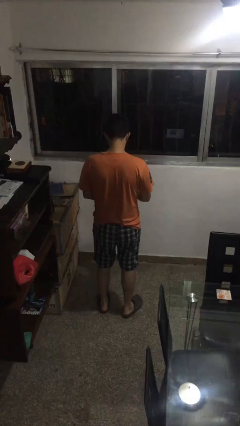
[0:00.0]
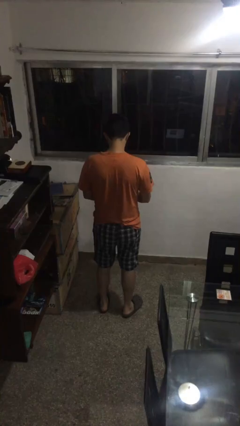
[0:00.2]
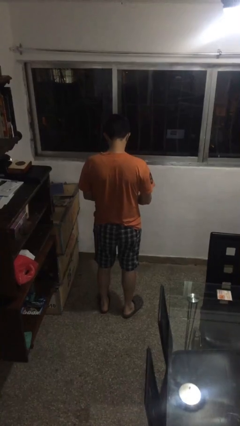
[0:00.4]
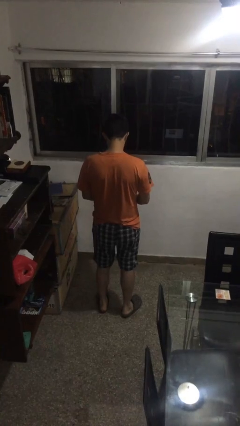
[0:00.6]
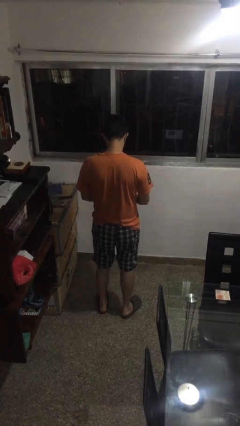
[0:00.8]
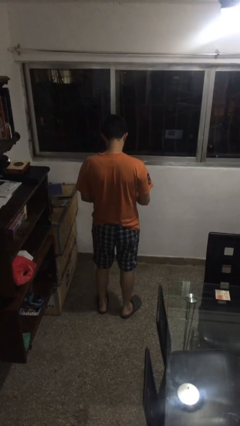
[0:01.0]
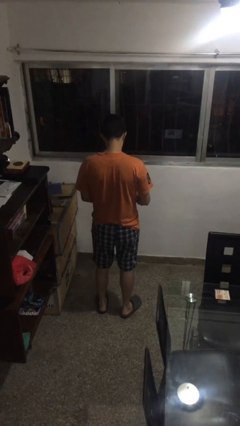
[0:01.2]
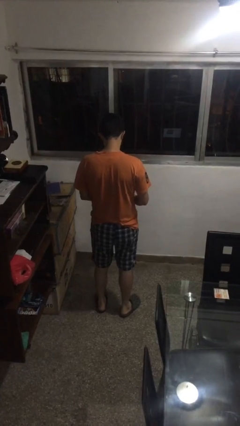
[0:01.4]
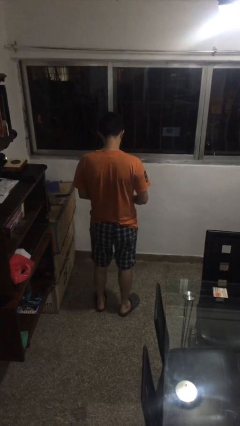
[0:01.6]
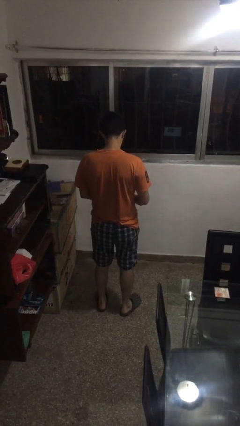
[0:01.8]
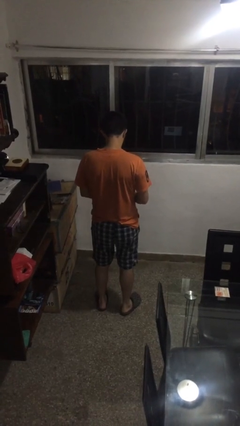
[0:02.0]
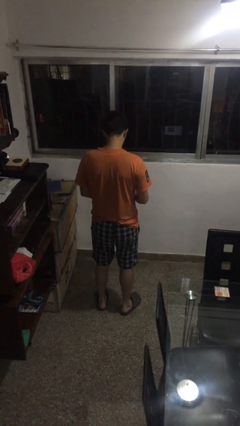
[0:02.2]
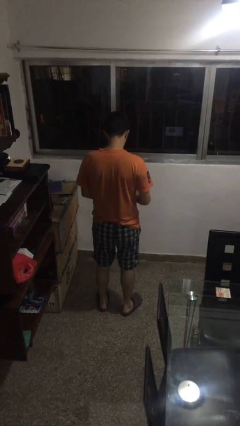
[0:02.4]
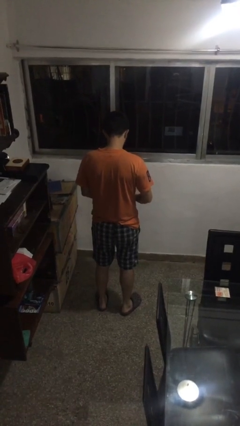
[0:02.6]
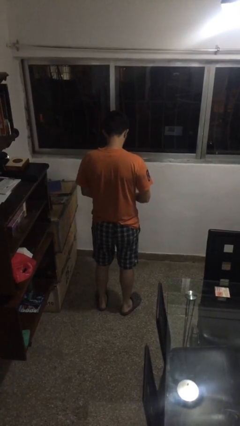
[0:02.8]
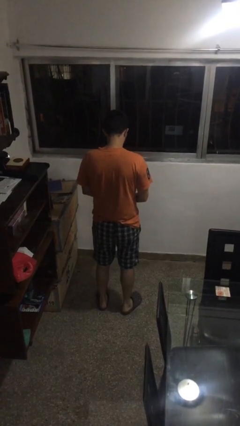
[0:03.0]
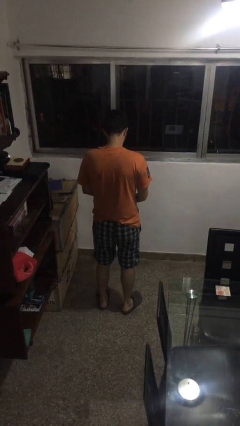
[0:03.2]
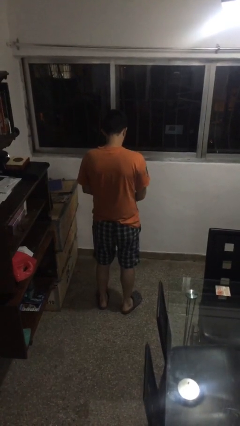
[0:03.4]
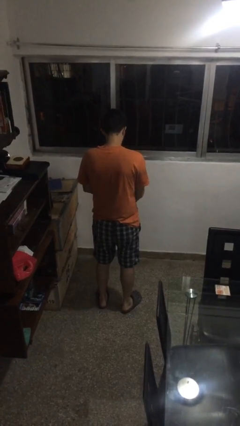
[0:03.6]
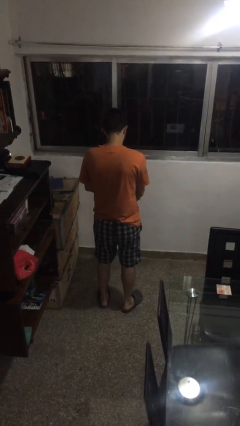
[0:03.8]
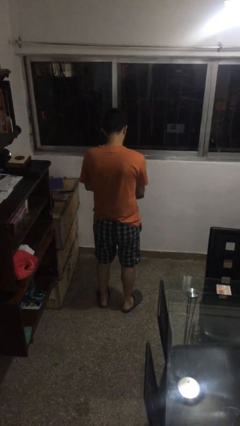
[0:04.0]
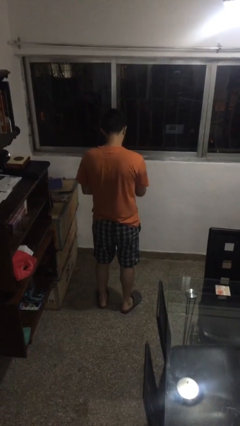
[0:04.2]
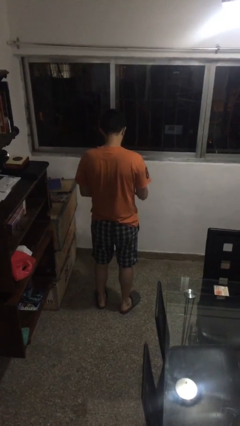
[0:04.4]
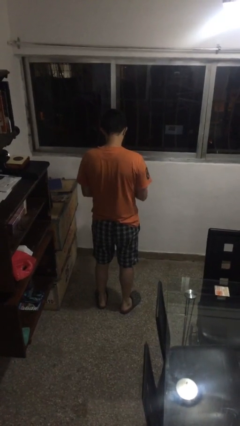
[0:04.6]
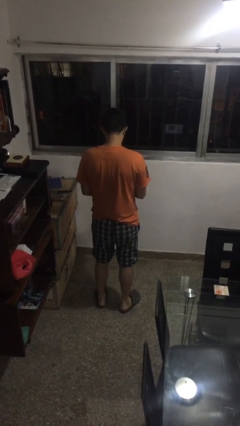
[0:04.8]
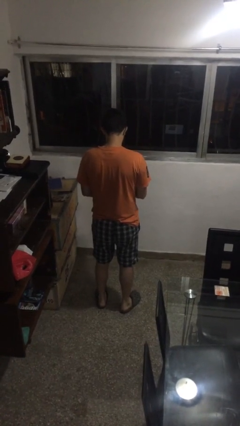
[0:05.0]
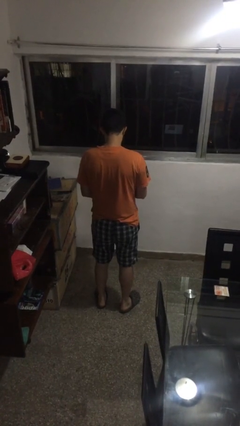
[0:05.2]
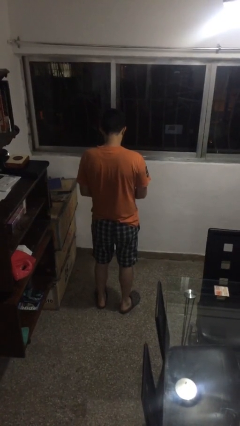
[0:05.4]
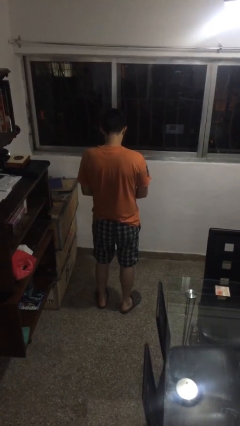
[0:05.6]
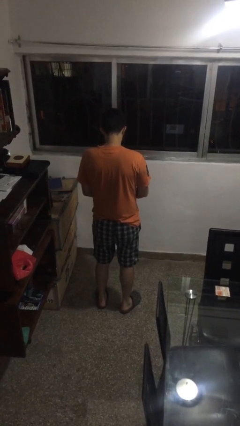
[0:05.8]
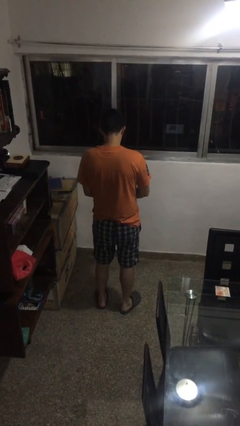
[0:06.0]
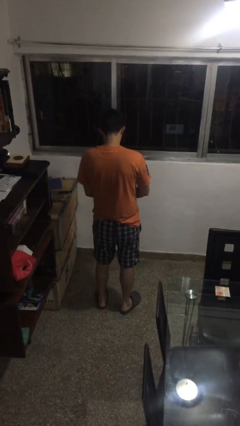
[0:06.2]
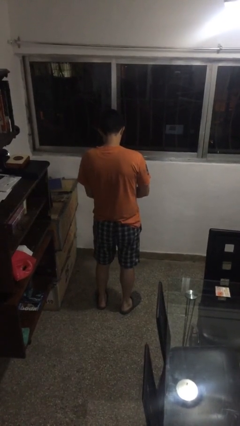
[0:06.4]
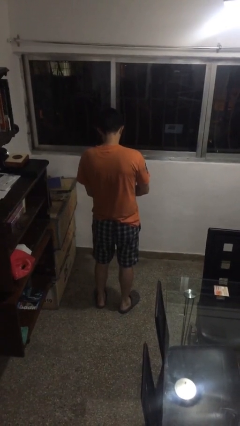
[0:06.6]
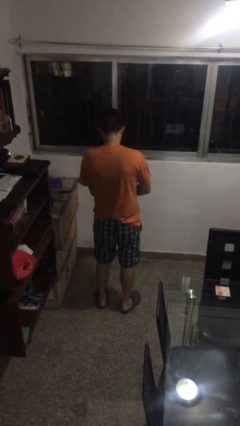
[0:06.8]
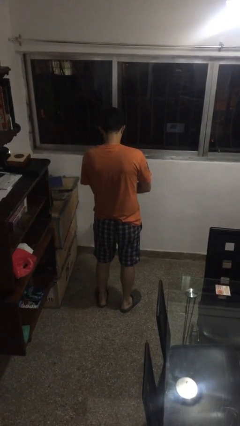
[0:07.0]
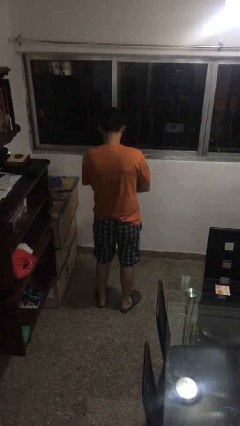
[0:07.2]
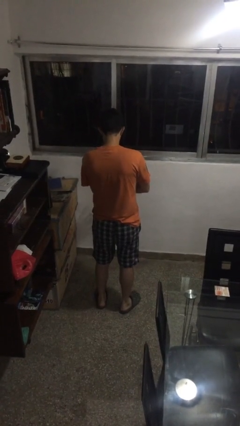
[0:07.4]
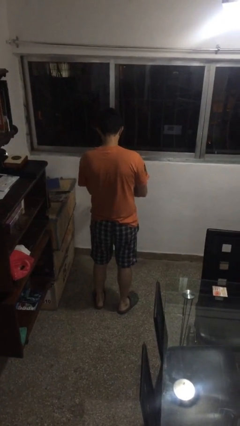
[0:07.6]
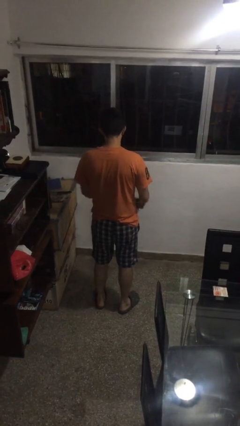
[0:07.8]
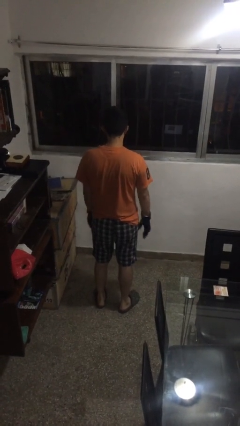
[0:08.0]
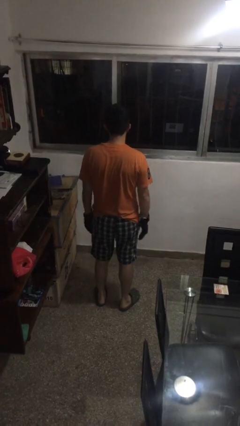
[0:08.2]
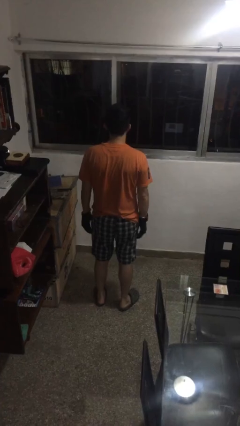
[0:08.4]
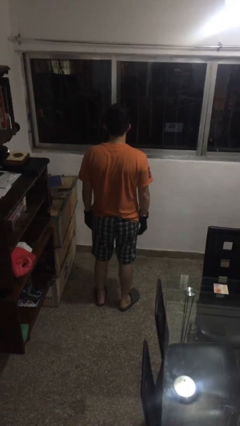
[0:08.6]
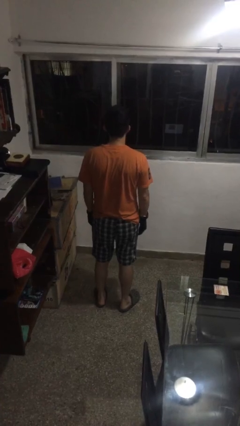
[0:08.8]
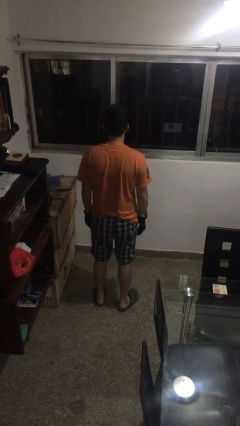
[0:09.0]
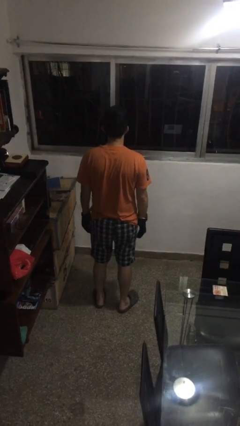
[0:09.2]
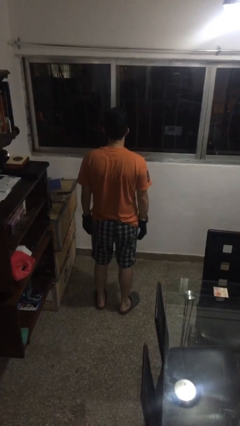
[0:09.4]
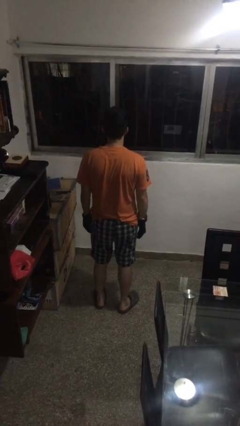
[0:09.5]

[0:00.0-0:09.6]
person puts on gloves

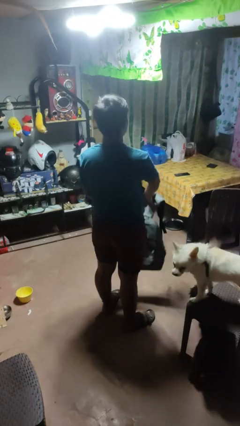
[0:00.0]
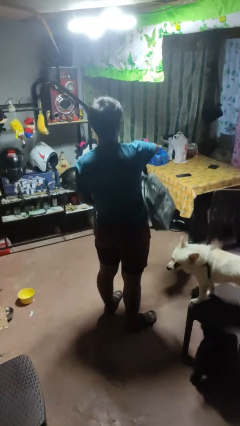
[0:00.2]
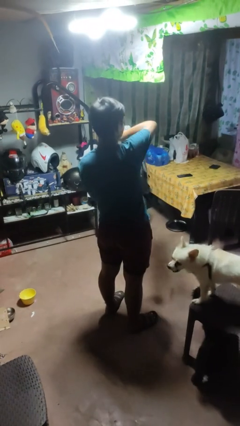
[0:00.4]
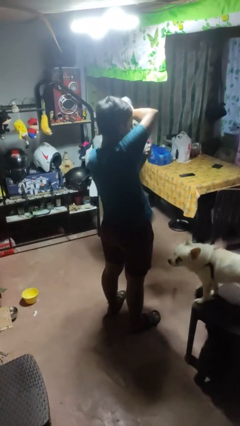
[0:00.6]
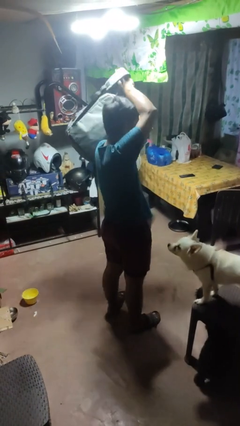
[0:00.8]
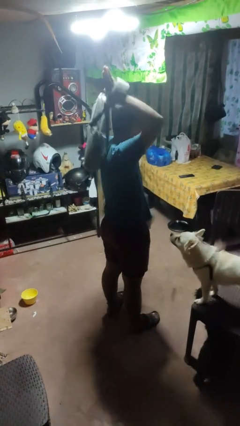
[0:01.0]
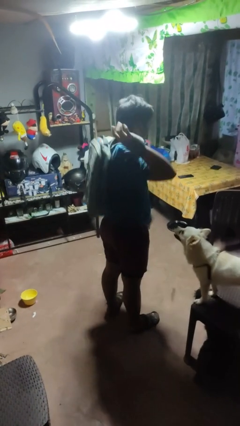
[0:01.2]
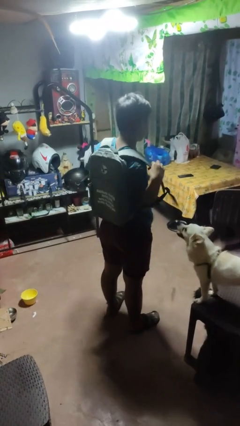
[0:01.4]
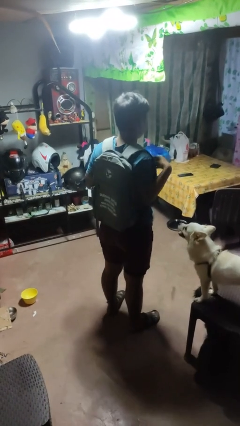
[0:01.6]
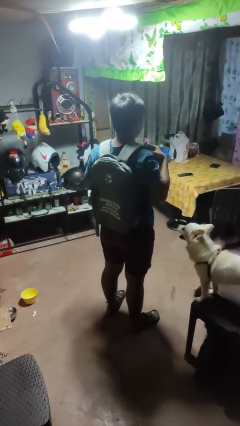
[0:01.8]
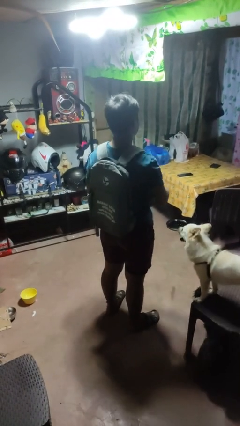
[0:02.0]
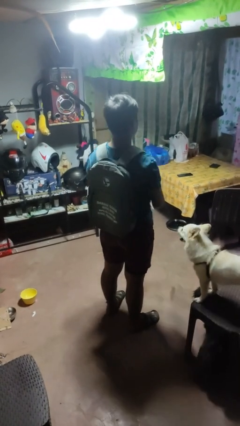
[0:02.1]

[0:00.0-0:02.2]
person puts on backpack

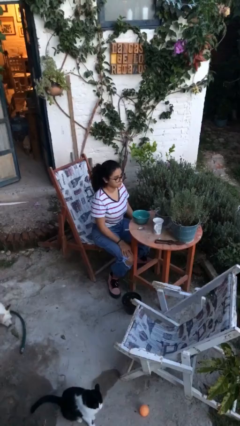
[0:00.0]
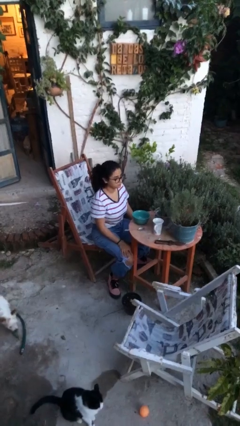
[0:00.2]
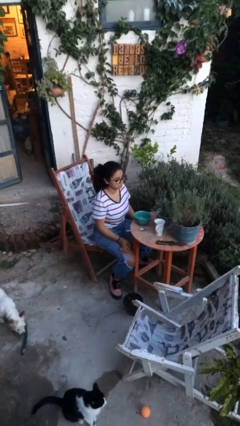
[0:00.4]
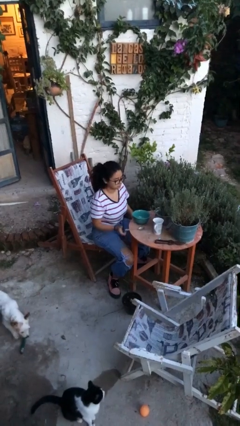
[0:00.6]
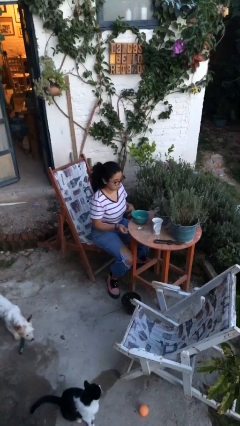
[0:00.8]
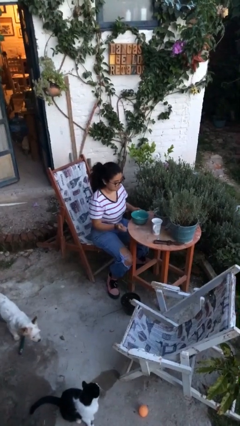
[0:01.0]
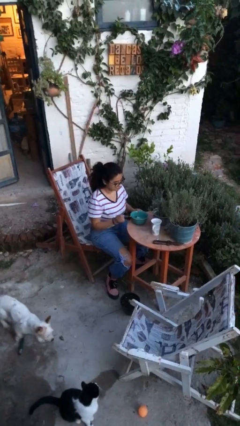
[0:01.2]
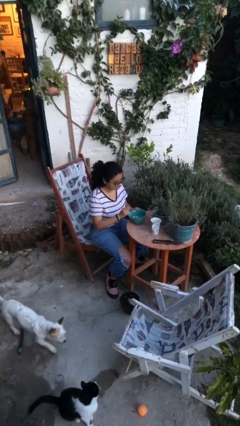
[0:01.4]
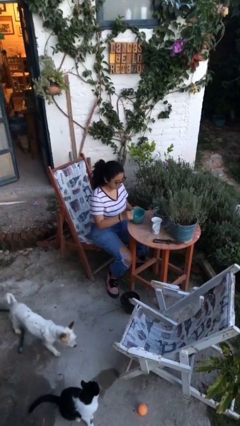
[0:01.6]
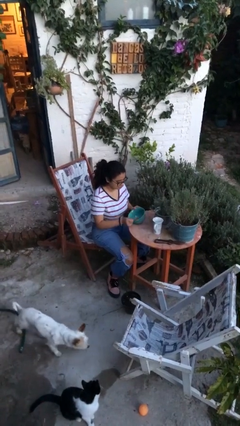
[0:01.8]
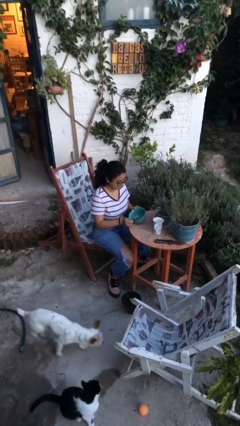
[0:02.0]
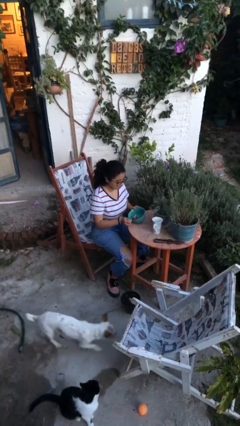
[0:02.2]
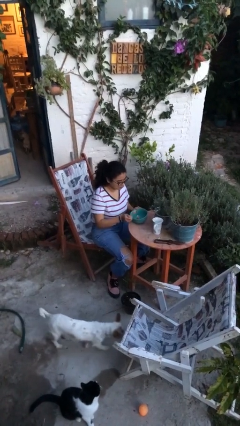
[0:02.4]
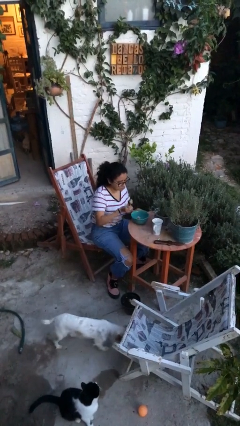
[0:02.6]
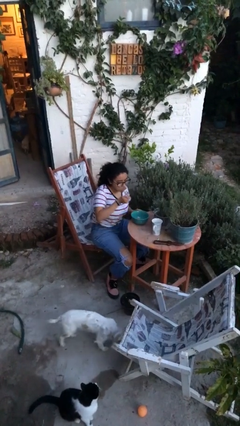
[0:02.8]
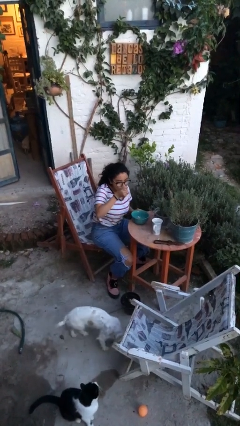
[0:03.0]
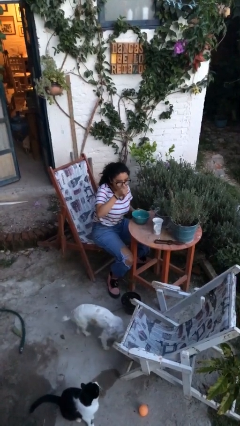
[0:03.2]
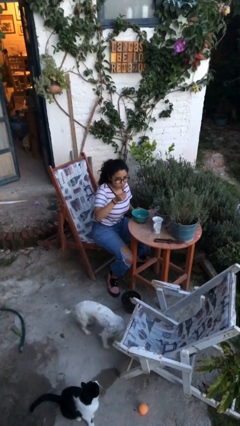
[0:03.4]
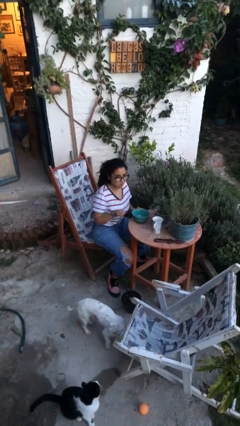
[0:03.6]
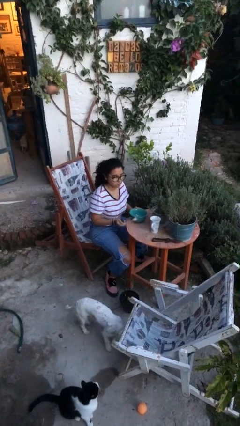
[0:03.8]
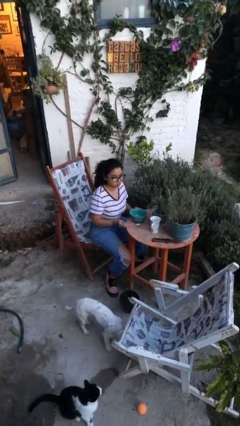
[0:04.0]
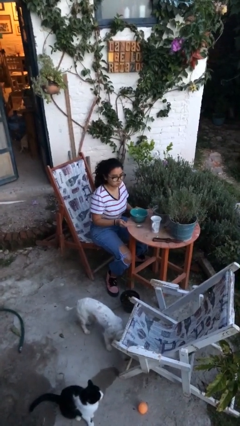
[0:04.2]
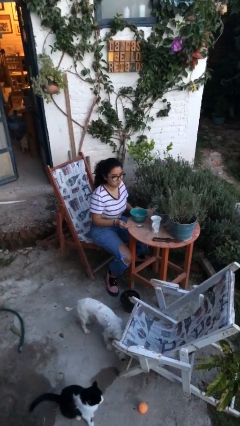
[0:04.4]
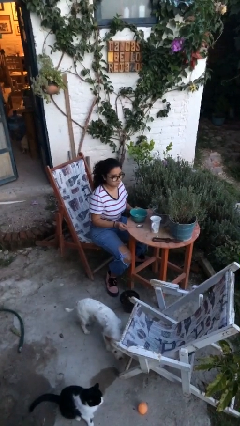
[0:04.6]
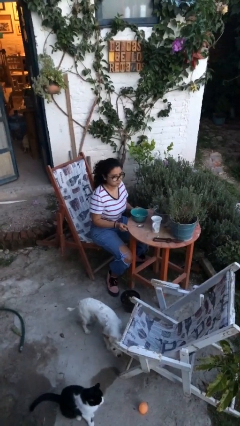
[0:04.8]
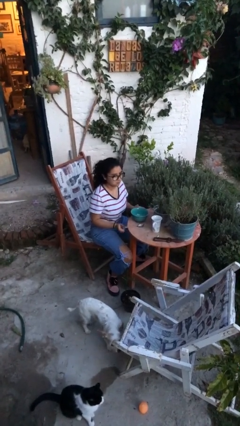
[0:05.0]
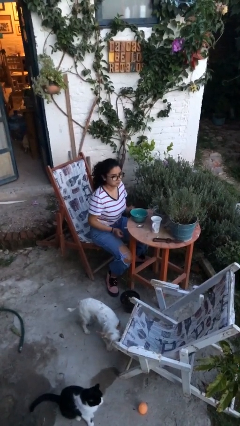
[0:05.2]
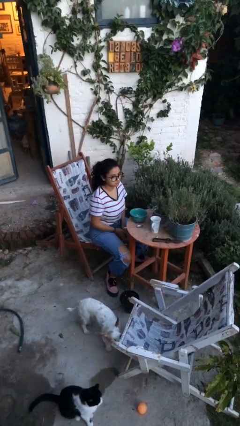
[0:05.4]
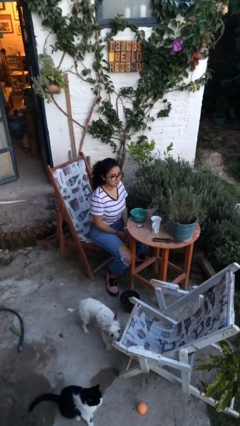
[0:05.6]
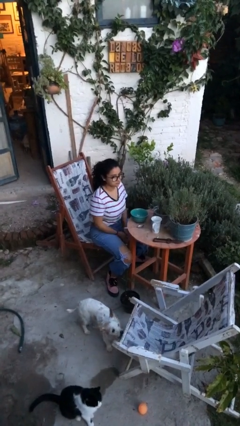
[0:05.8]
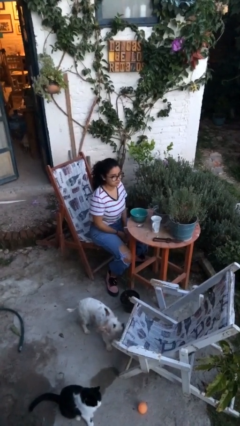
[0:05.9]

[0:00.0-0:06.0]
person eats with utensil
